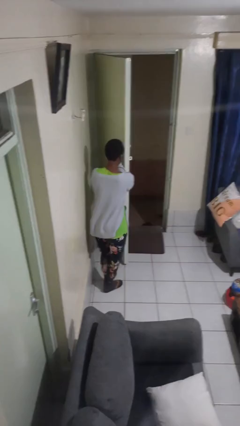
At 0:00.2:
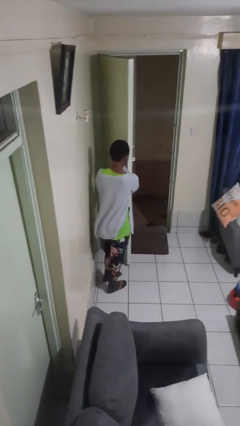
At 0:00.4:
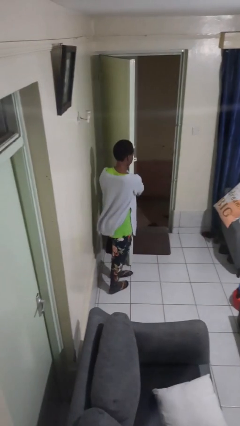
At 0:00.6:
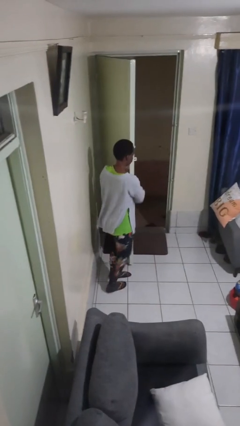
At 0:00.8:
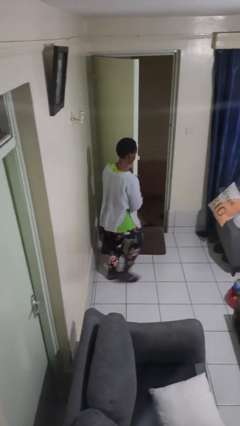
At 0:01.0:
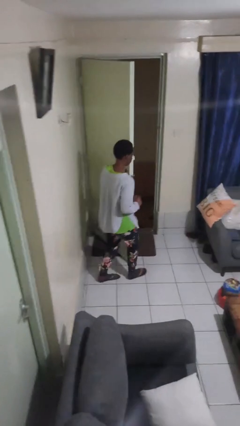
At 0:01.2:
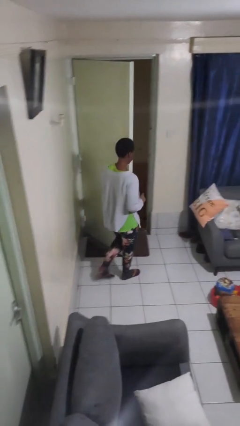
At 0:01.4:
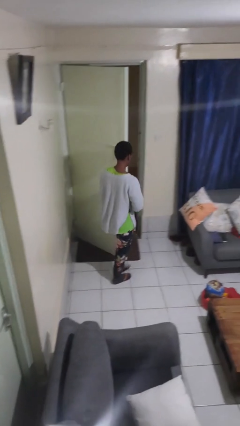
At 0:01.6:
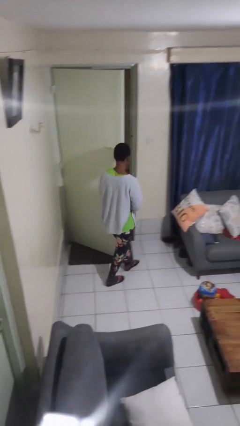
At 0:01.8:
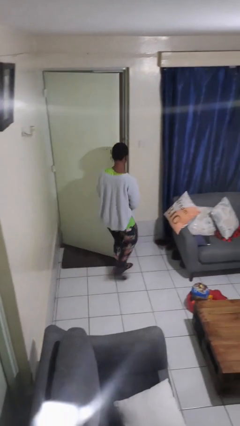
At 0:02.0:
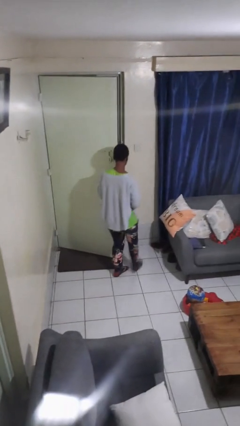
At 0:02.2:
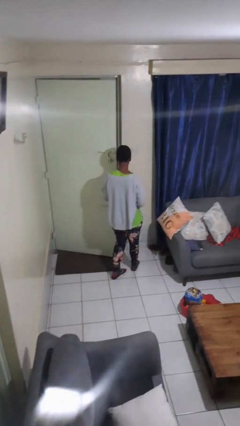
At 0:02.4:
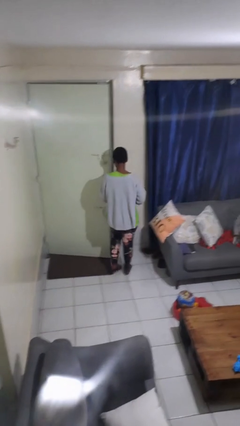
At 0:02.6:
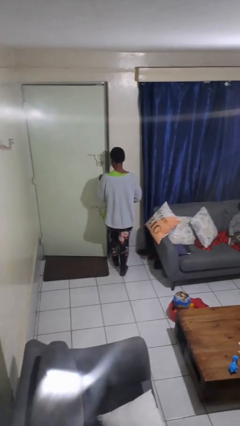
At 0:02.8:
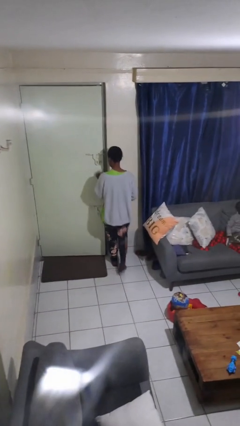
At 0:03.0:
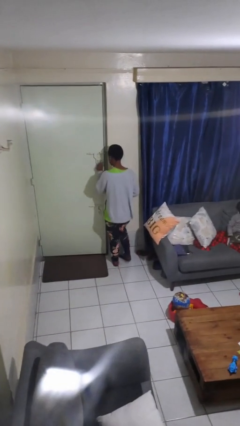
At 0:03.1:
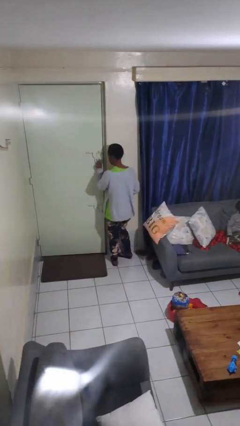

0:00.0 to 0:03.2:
person closes facility door

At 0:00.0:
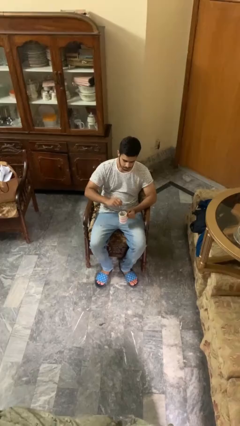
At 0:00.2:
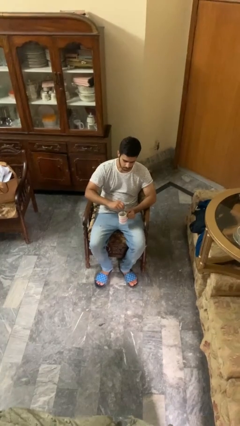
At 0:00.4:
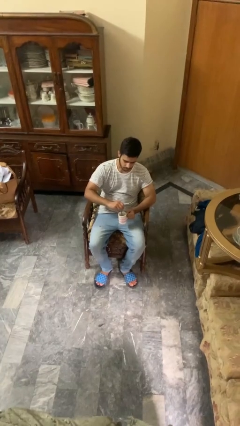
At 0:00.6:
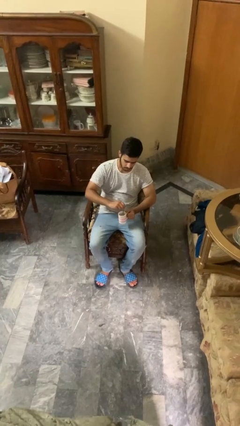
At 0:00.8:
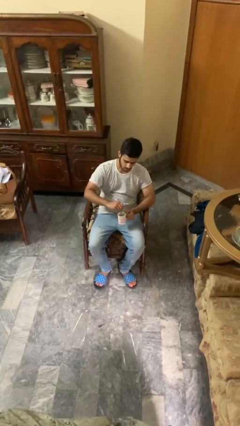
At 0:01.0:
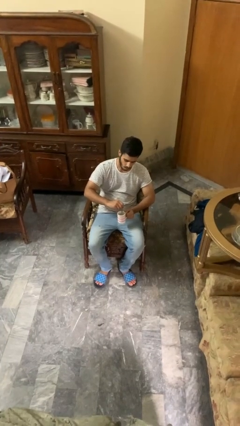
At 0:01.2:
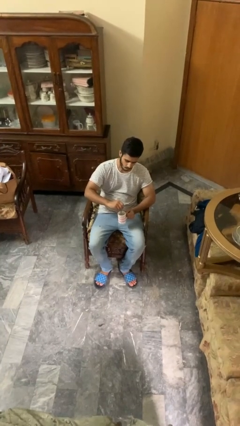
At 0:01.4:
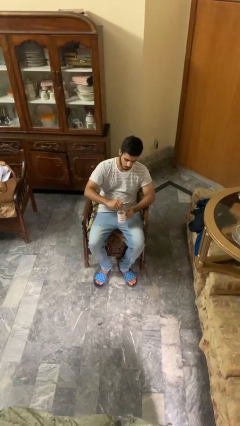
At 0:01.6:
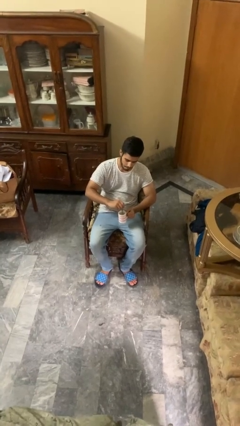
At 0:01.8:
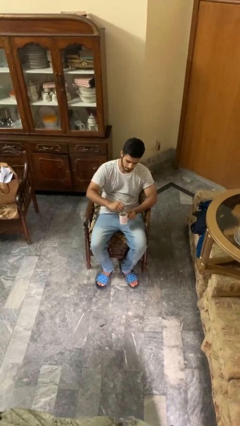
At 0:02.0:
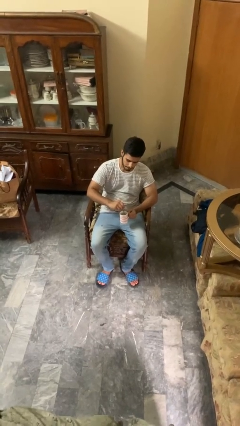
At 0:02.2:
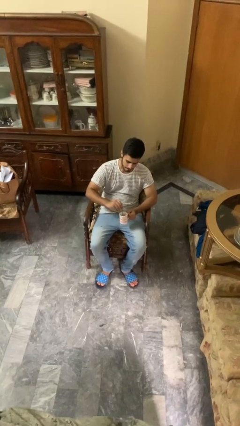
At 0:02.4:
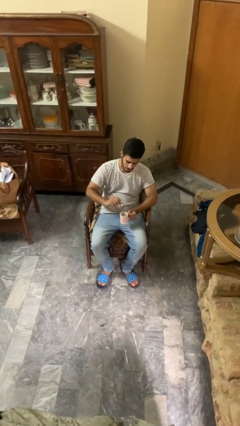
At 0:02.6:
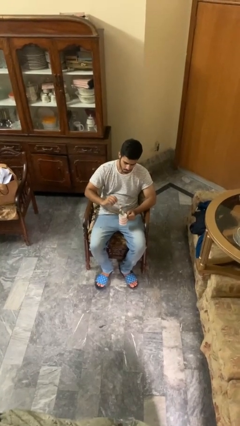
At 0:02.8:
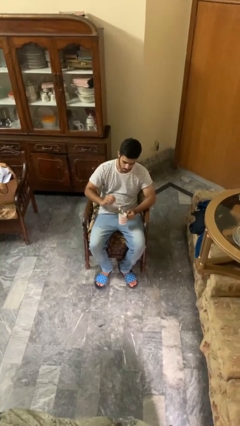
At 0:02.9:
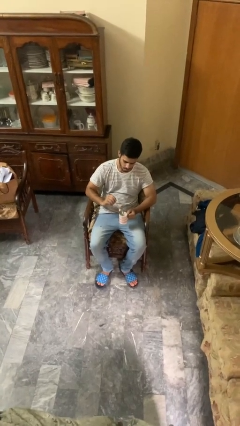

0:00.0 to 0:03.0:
person stirs mug

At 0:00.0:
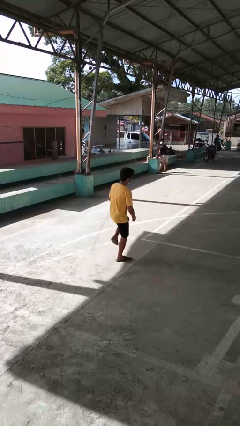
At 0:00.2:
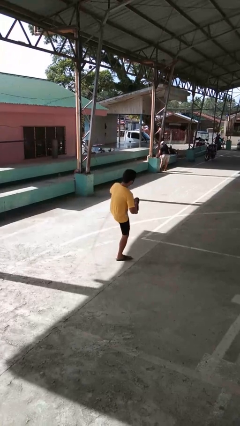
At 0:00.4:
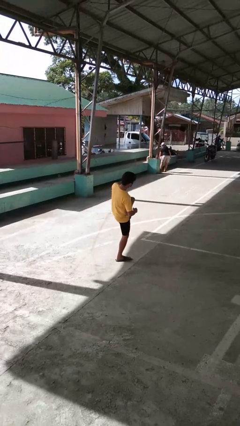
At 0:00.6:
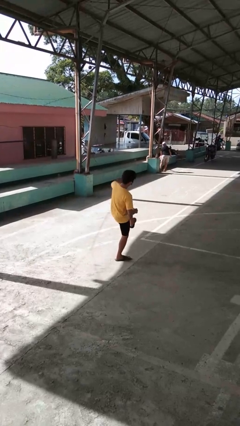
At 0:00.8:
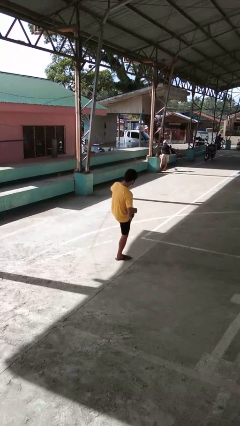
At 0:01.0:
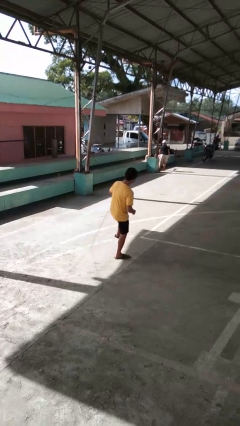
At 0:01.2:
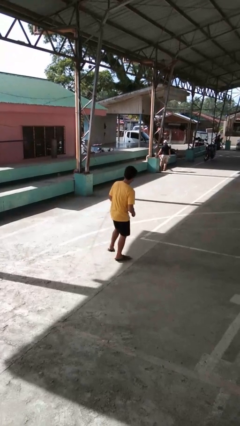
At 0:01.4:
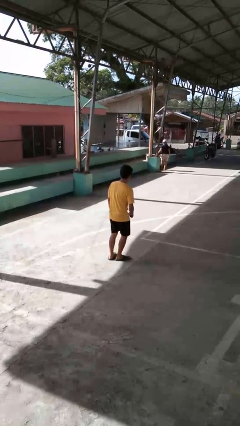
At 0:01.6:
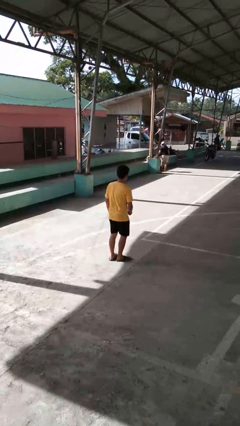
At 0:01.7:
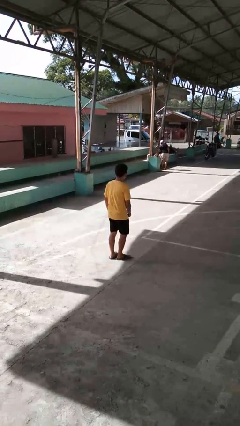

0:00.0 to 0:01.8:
person karate kicks

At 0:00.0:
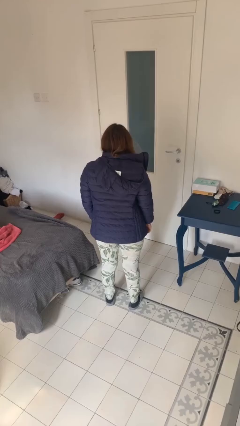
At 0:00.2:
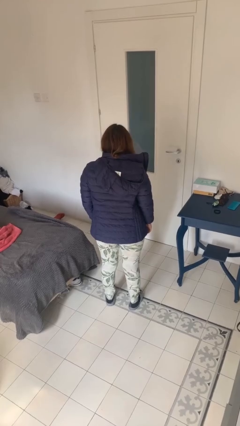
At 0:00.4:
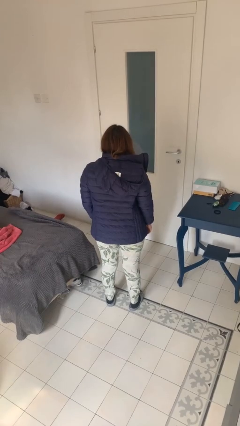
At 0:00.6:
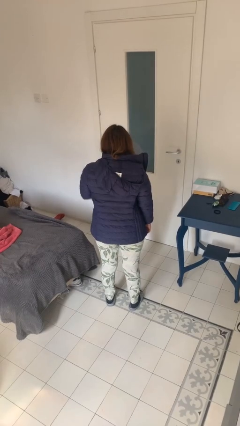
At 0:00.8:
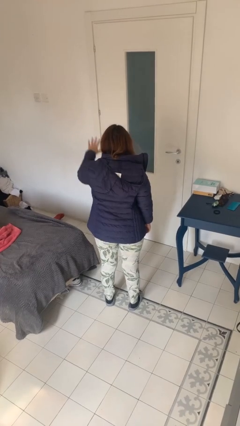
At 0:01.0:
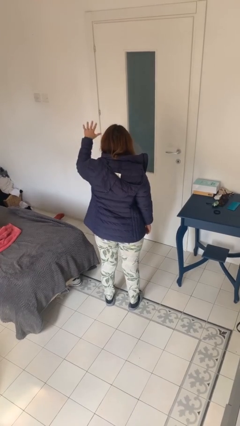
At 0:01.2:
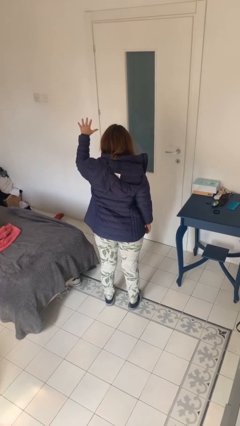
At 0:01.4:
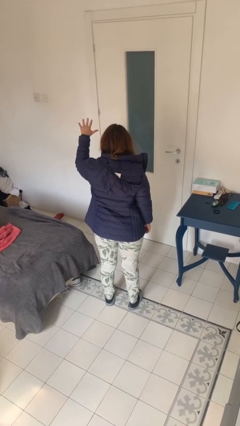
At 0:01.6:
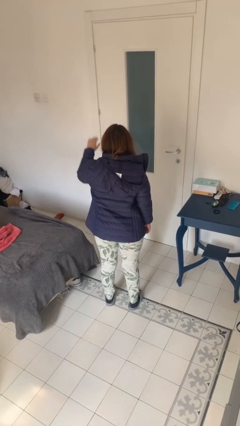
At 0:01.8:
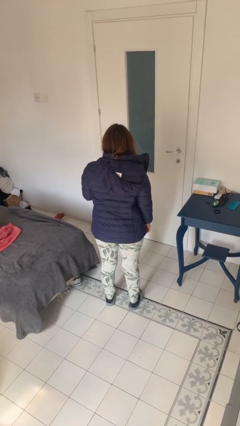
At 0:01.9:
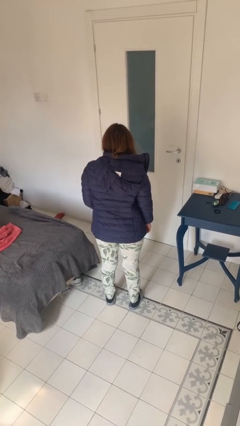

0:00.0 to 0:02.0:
person gestures number five

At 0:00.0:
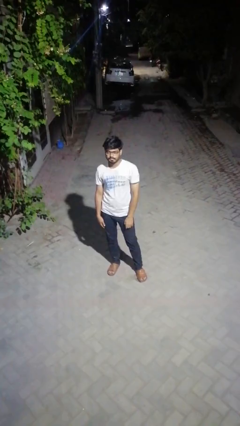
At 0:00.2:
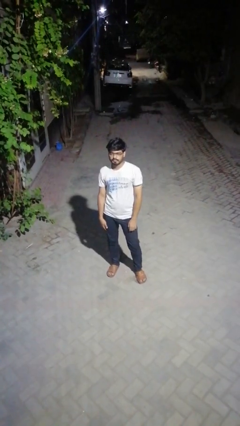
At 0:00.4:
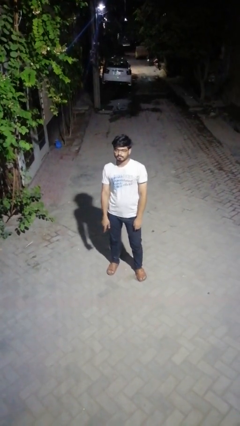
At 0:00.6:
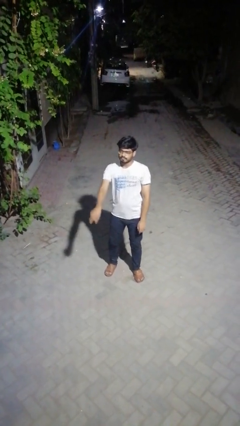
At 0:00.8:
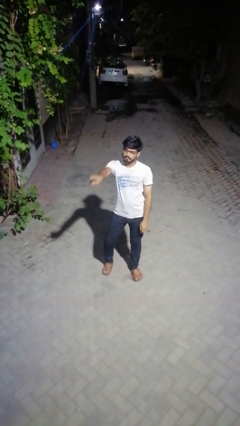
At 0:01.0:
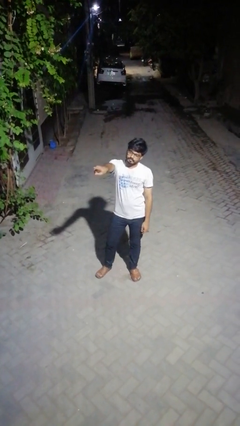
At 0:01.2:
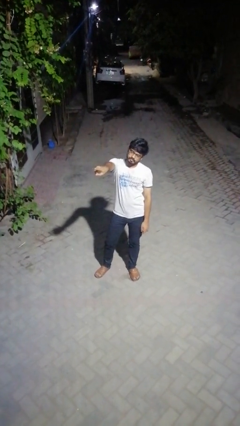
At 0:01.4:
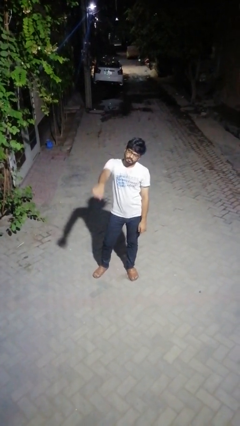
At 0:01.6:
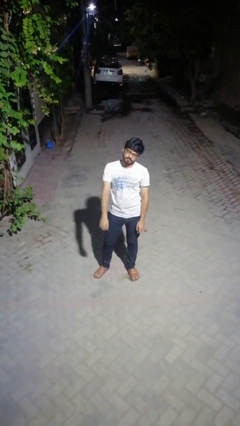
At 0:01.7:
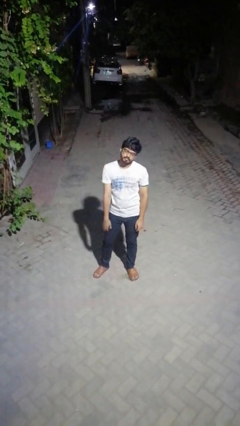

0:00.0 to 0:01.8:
person points at person

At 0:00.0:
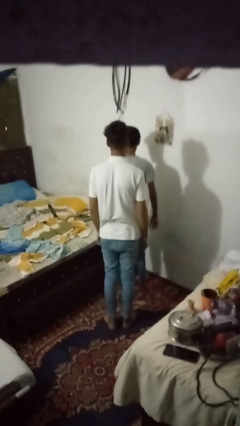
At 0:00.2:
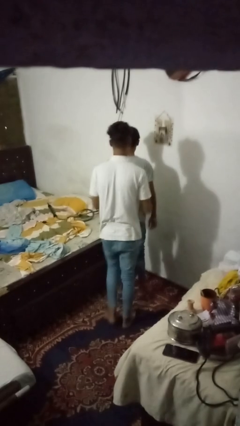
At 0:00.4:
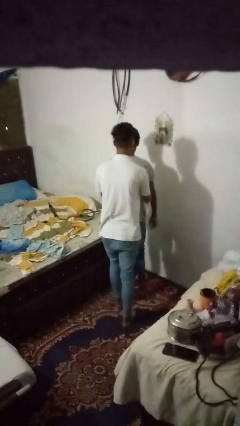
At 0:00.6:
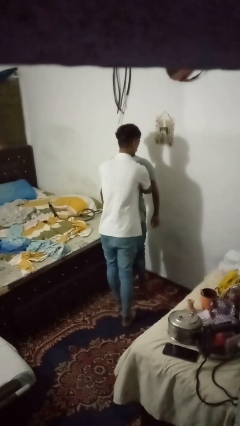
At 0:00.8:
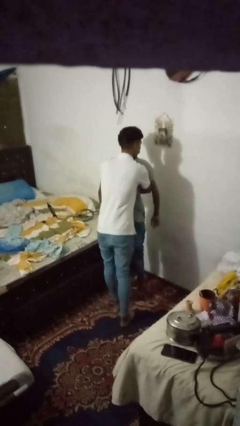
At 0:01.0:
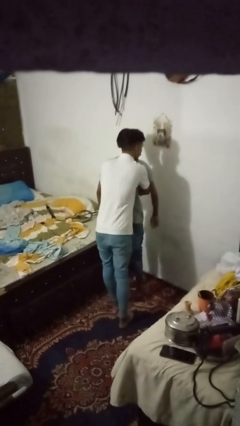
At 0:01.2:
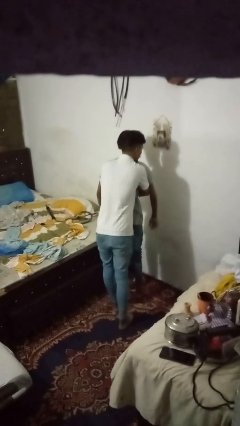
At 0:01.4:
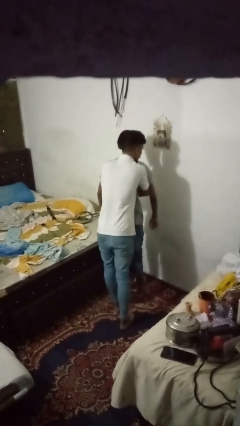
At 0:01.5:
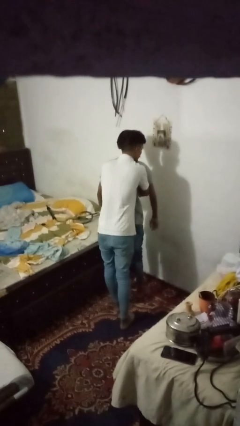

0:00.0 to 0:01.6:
person hugs person from behind

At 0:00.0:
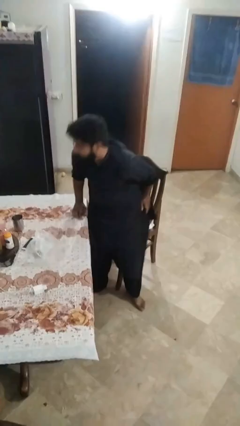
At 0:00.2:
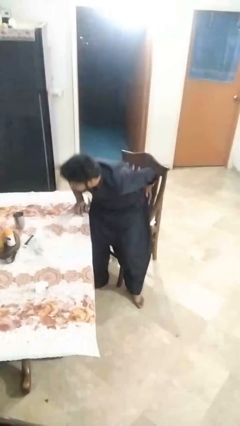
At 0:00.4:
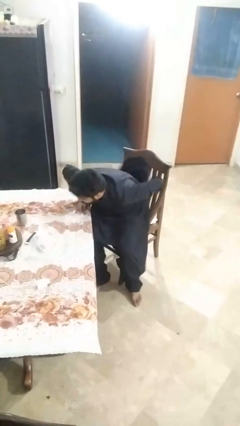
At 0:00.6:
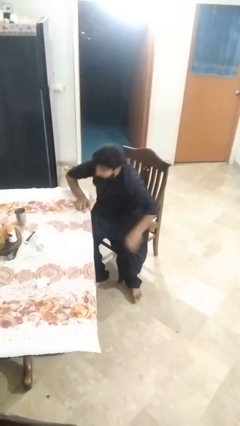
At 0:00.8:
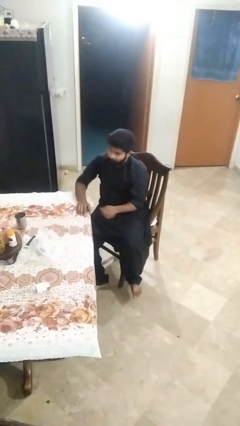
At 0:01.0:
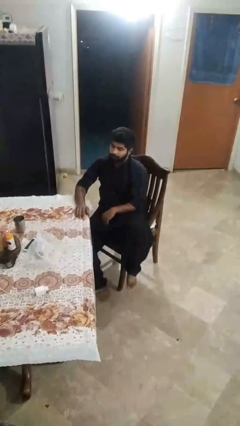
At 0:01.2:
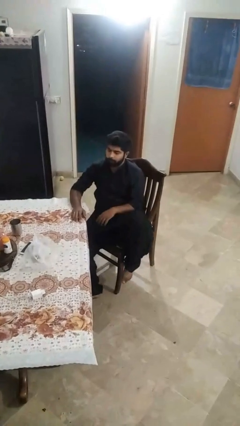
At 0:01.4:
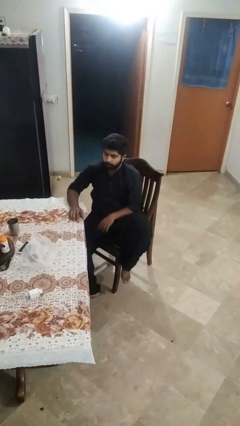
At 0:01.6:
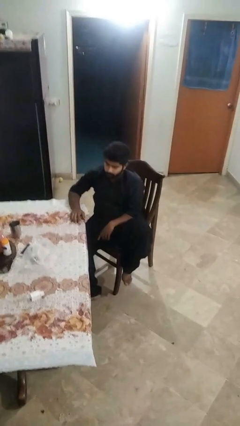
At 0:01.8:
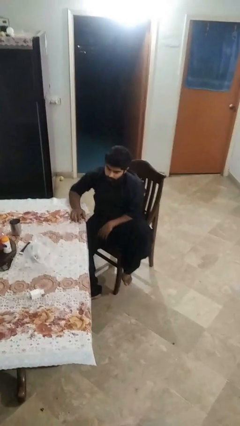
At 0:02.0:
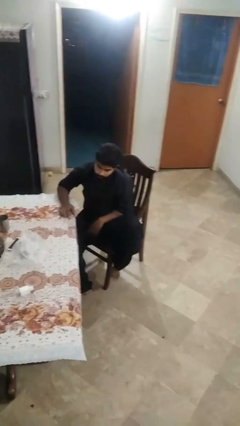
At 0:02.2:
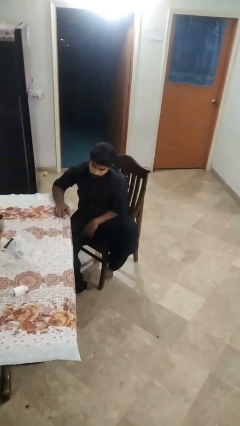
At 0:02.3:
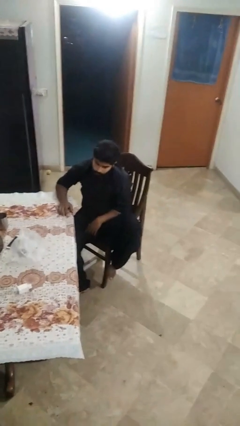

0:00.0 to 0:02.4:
person sits down

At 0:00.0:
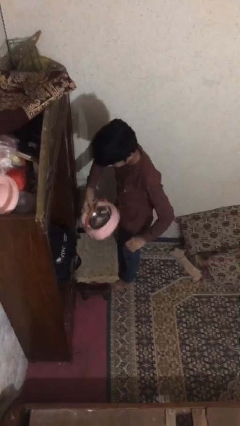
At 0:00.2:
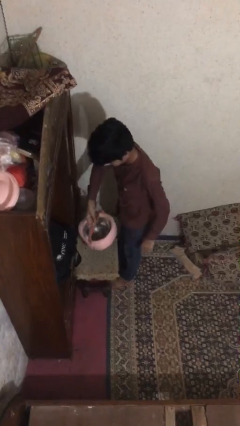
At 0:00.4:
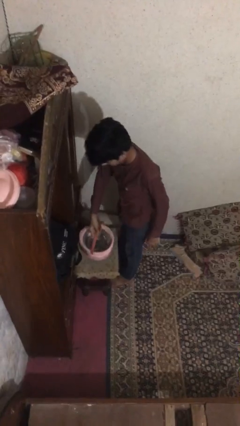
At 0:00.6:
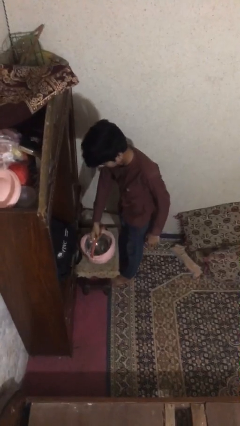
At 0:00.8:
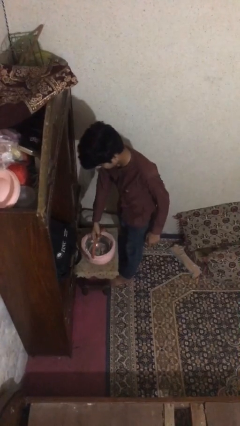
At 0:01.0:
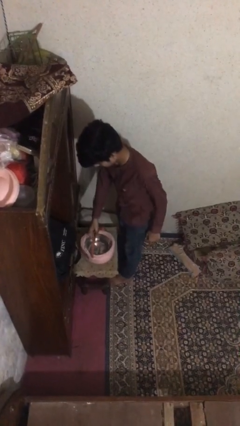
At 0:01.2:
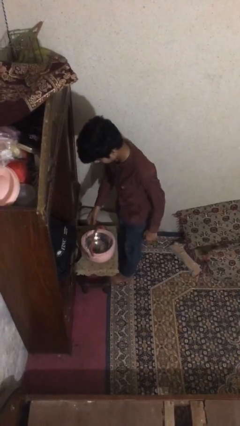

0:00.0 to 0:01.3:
person puts down object on table
